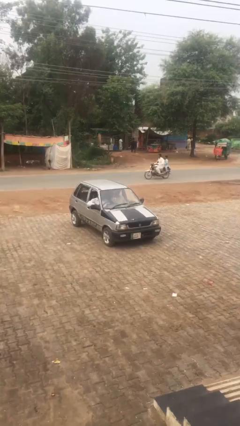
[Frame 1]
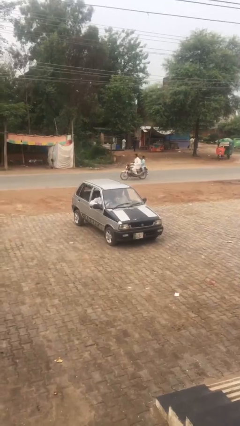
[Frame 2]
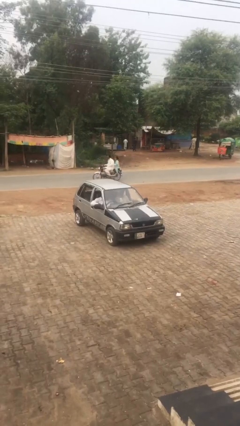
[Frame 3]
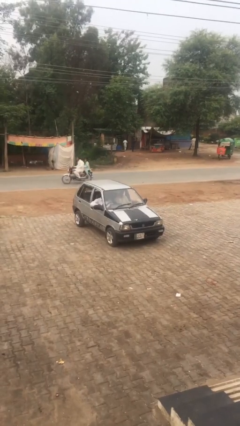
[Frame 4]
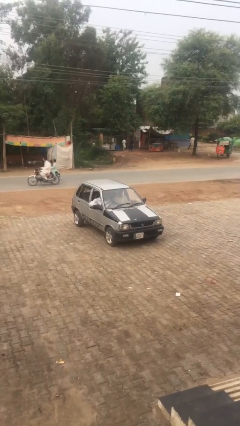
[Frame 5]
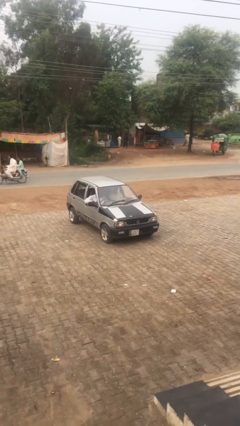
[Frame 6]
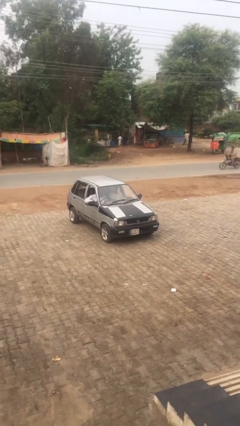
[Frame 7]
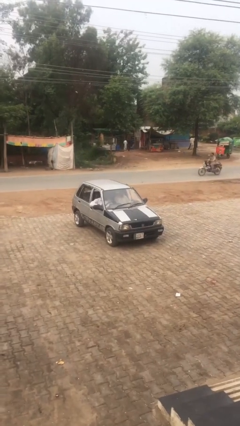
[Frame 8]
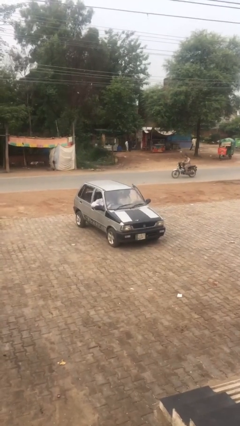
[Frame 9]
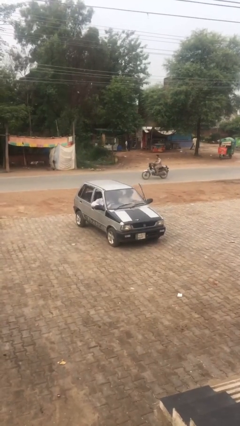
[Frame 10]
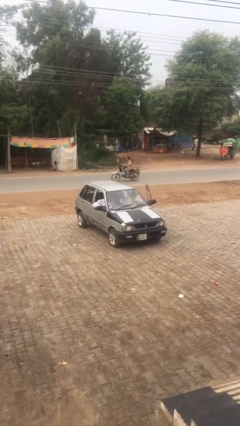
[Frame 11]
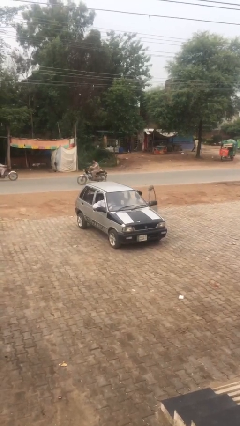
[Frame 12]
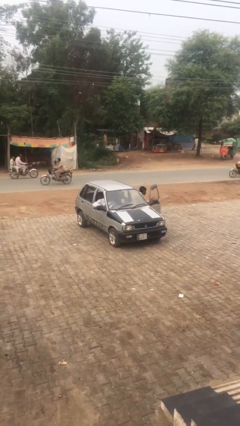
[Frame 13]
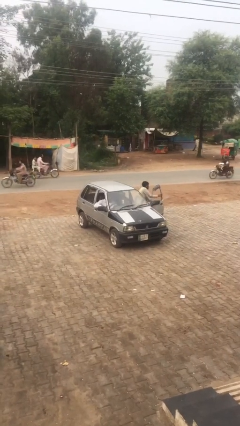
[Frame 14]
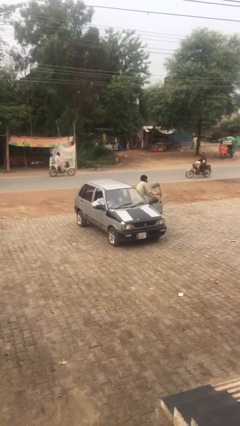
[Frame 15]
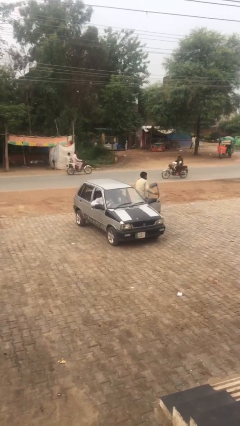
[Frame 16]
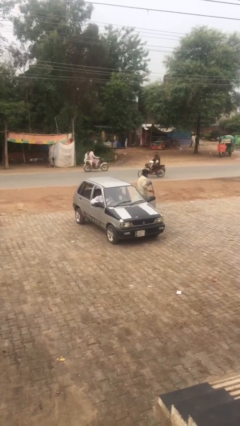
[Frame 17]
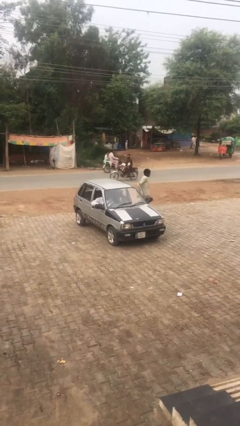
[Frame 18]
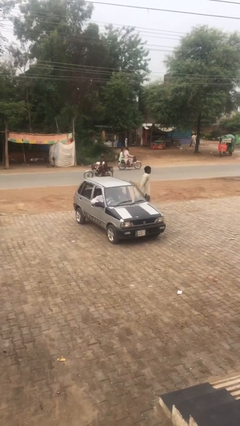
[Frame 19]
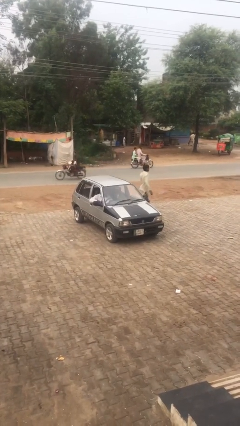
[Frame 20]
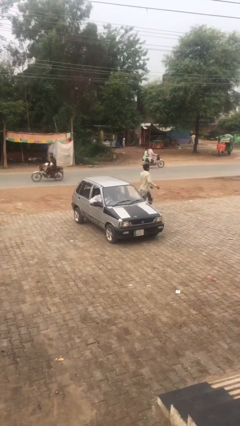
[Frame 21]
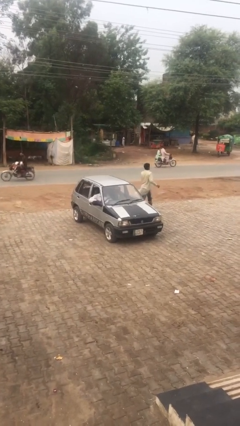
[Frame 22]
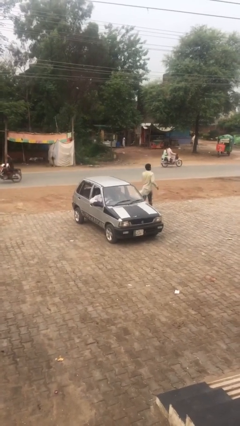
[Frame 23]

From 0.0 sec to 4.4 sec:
car drops off person

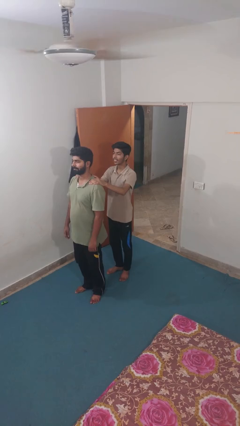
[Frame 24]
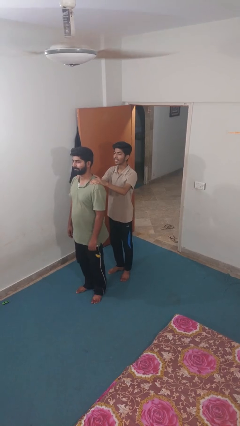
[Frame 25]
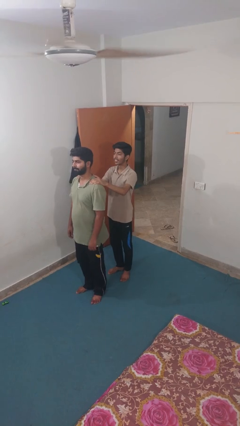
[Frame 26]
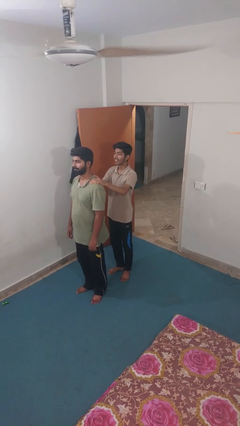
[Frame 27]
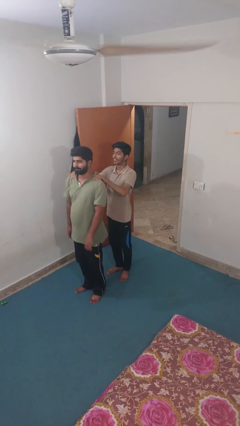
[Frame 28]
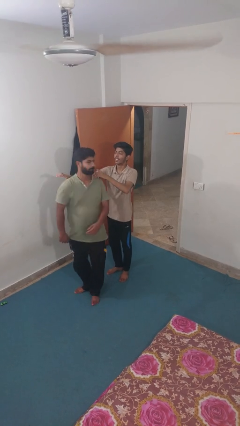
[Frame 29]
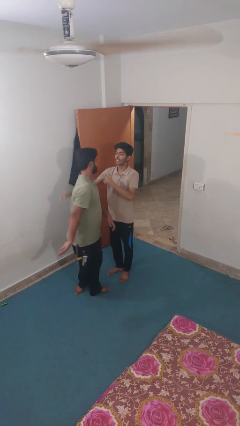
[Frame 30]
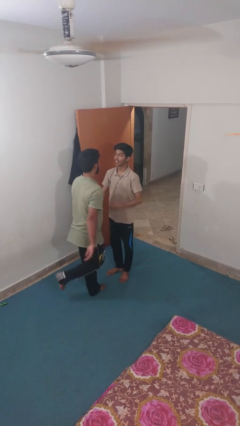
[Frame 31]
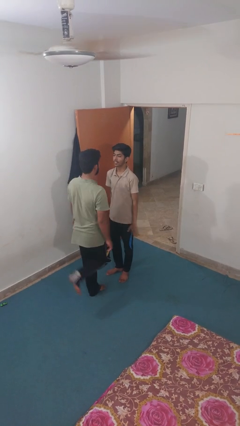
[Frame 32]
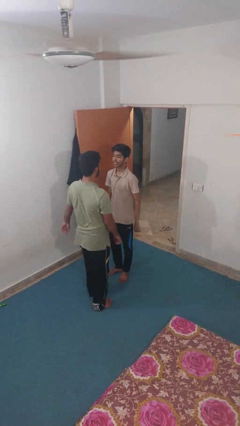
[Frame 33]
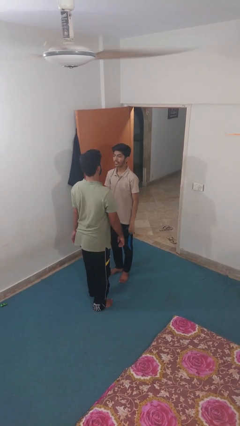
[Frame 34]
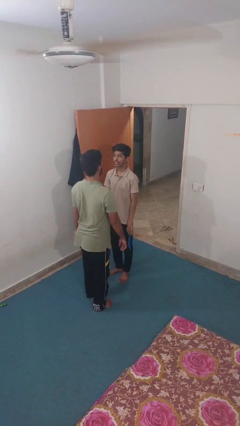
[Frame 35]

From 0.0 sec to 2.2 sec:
person spins person around

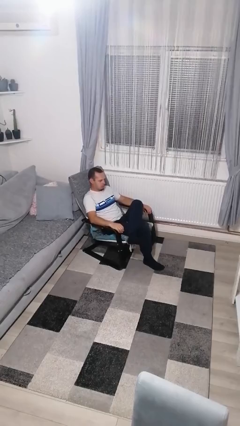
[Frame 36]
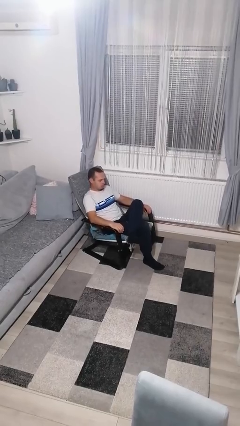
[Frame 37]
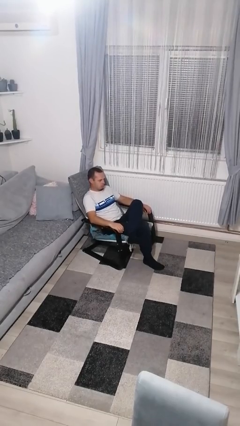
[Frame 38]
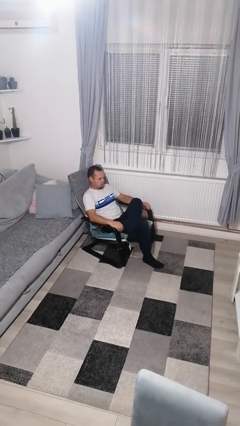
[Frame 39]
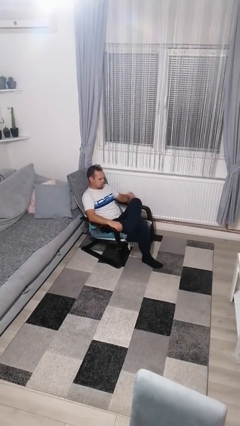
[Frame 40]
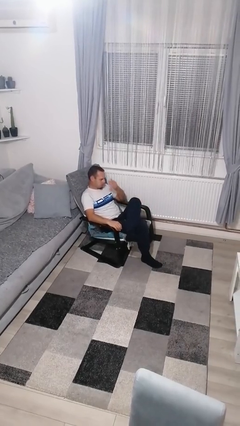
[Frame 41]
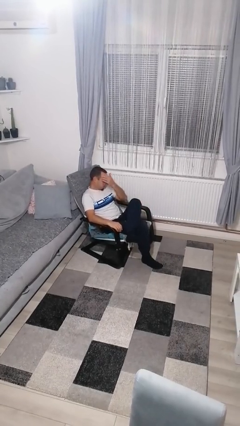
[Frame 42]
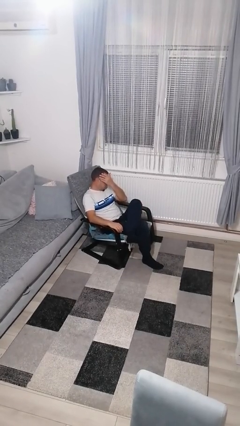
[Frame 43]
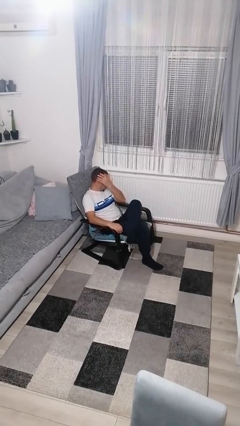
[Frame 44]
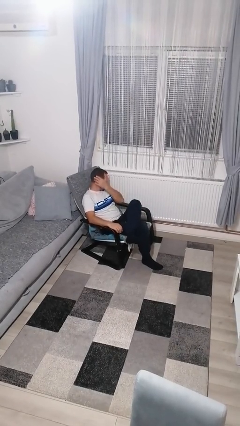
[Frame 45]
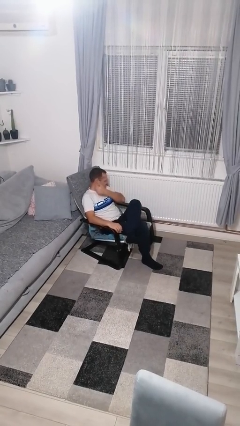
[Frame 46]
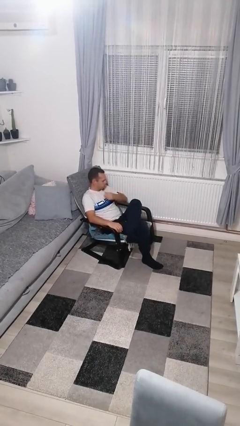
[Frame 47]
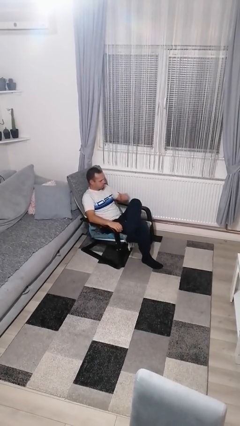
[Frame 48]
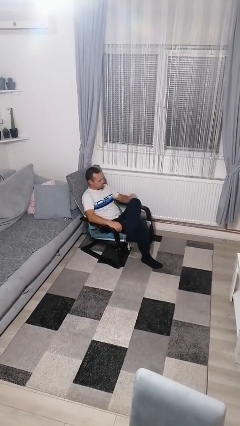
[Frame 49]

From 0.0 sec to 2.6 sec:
person strokes hair

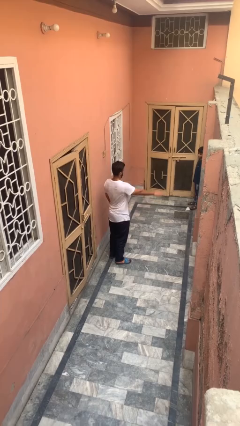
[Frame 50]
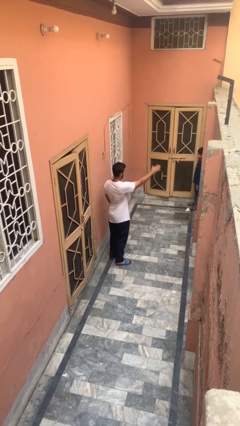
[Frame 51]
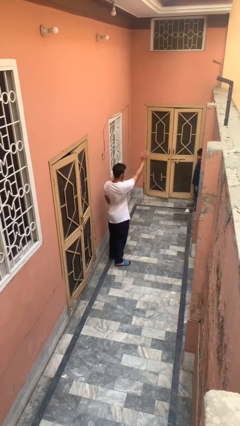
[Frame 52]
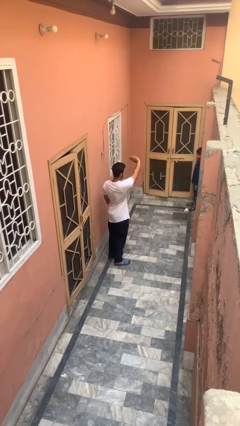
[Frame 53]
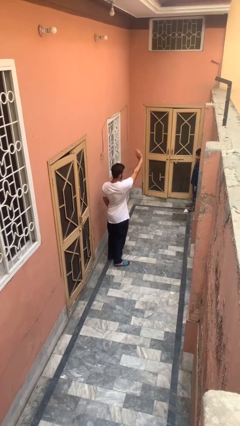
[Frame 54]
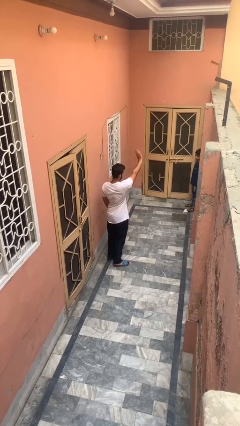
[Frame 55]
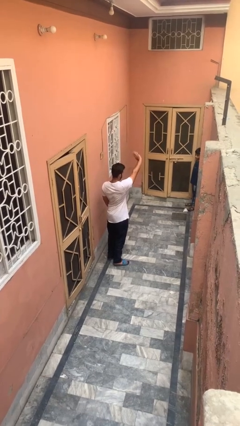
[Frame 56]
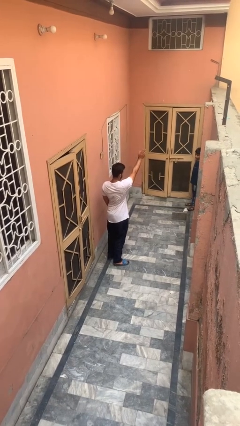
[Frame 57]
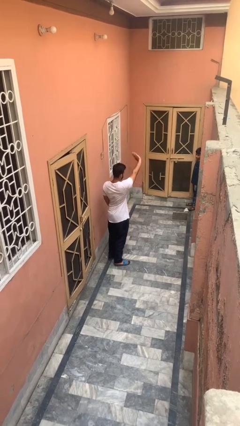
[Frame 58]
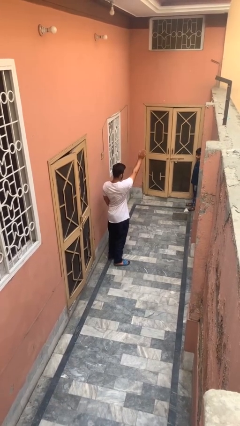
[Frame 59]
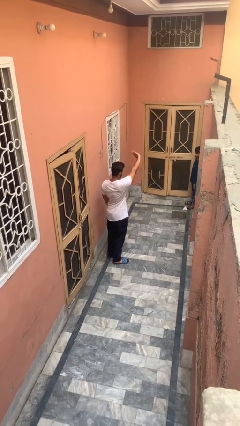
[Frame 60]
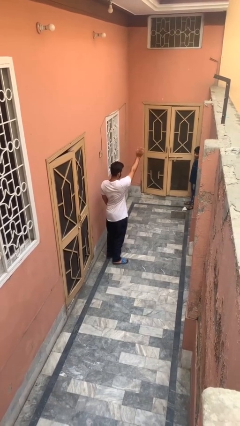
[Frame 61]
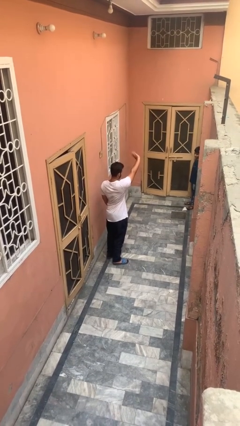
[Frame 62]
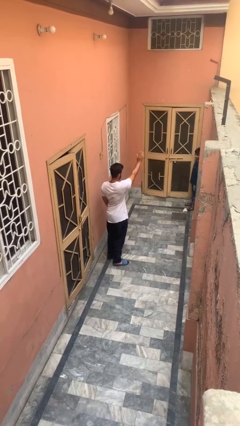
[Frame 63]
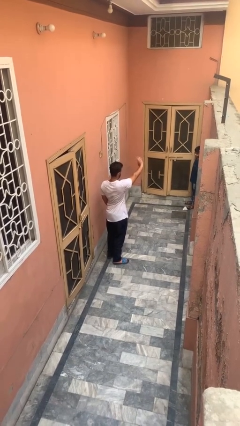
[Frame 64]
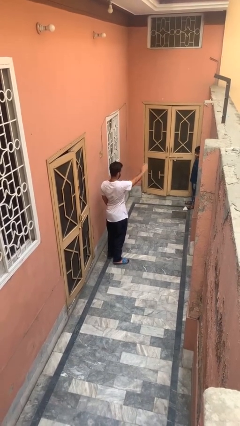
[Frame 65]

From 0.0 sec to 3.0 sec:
person waves at person

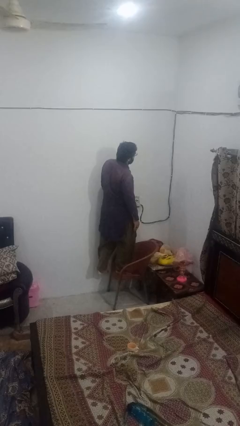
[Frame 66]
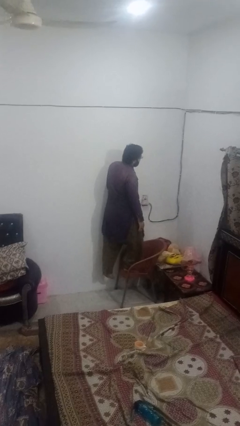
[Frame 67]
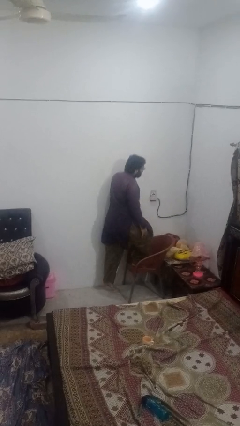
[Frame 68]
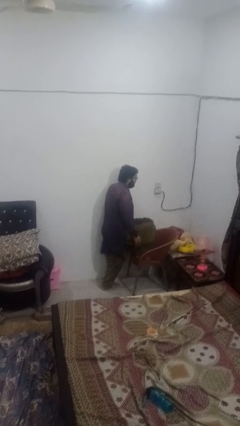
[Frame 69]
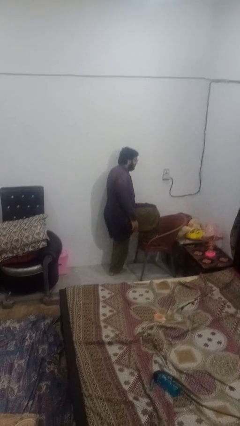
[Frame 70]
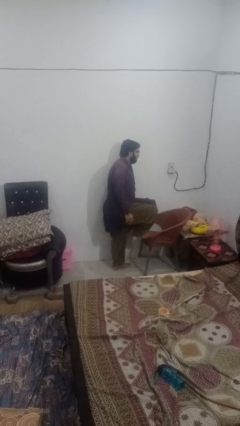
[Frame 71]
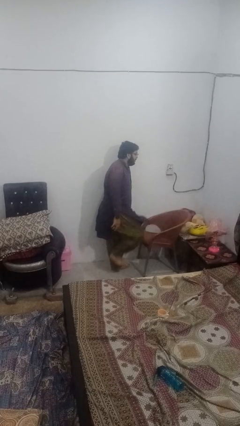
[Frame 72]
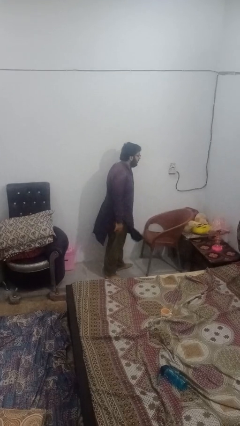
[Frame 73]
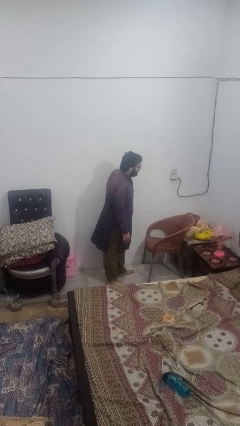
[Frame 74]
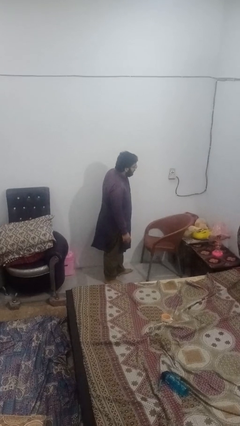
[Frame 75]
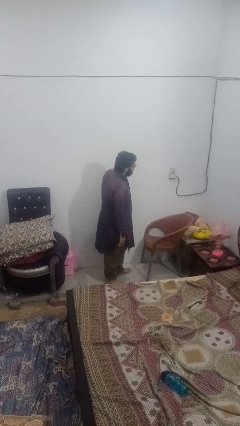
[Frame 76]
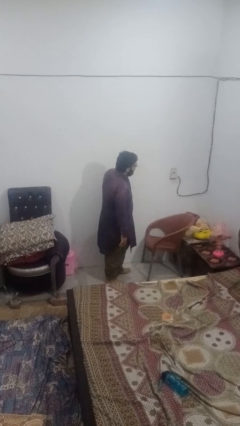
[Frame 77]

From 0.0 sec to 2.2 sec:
person climbs off chair

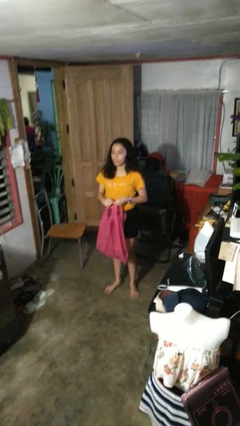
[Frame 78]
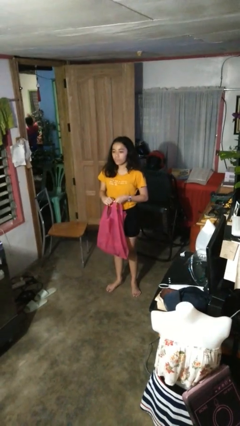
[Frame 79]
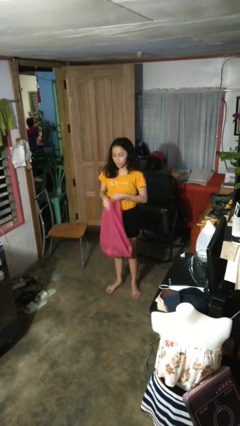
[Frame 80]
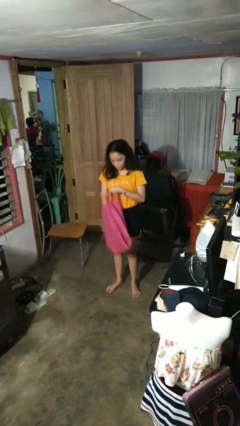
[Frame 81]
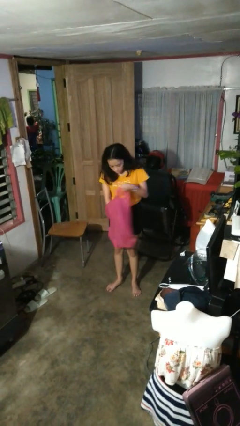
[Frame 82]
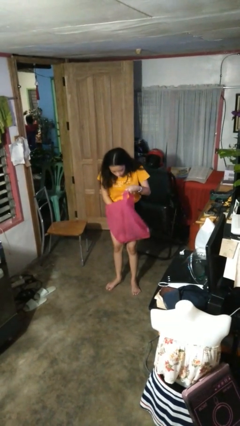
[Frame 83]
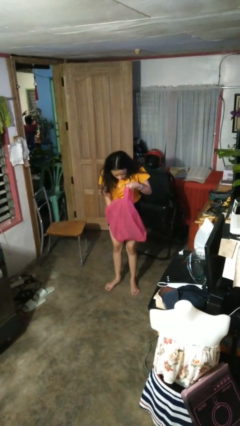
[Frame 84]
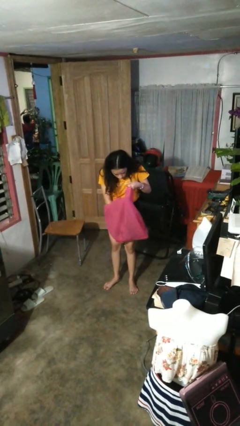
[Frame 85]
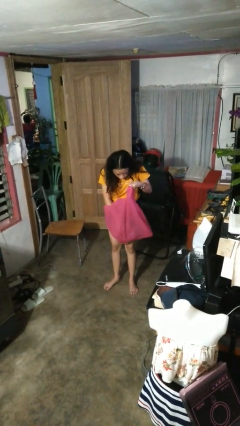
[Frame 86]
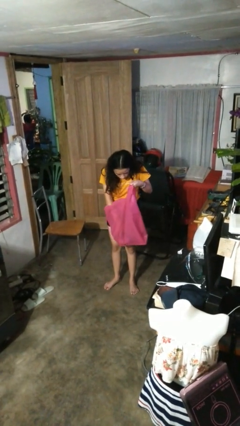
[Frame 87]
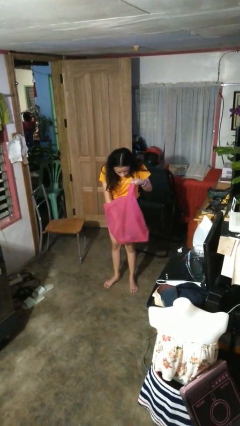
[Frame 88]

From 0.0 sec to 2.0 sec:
person searches in bag

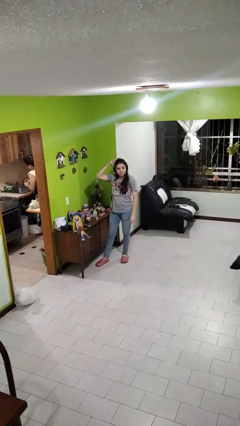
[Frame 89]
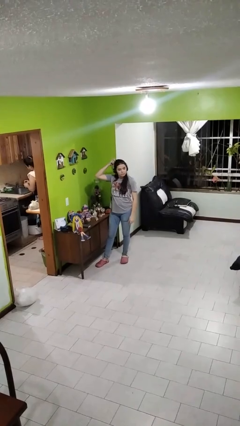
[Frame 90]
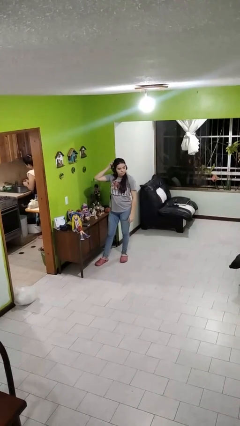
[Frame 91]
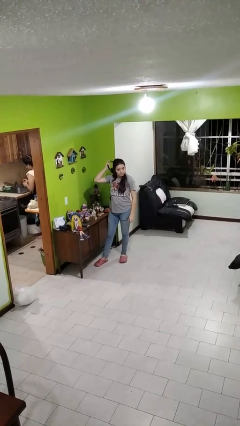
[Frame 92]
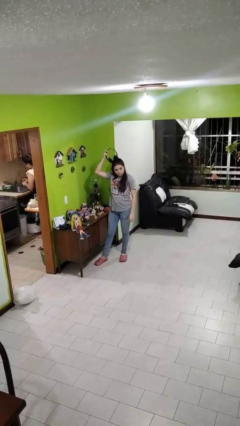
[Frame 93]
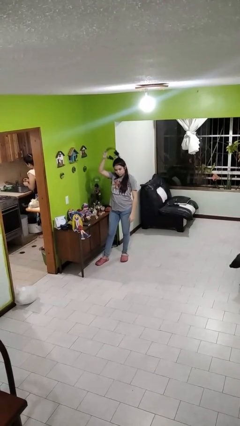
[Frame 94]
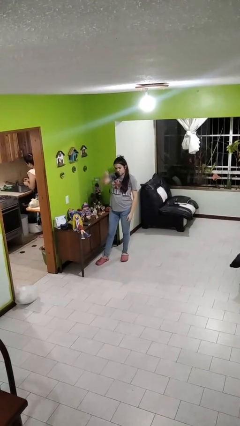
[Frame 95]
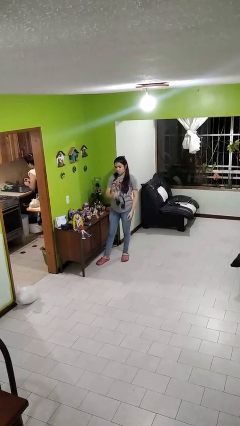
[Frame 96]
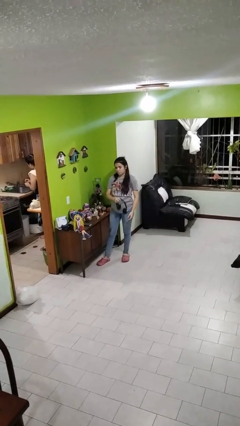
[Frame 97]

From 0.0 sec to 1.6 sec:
person takes off headphones
